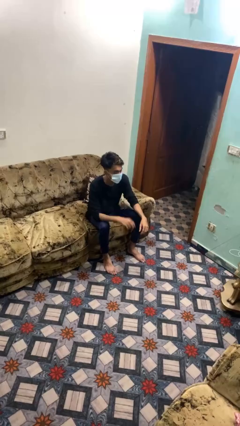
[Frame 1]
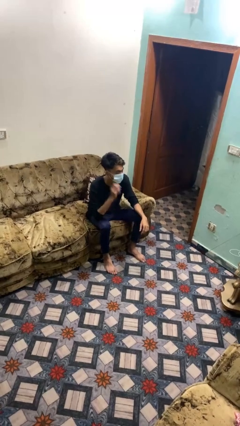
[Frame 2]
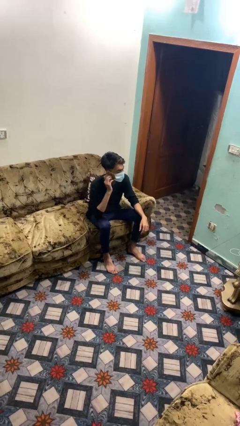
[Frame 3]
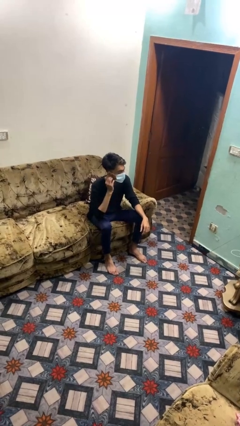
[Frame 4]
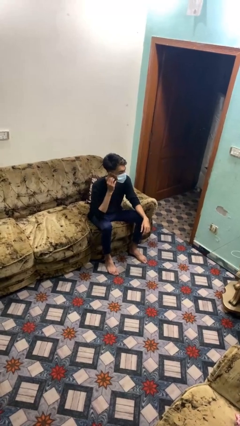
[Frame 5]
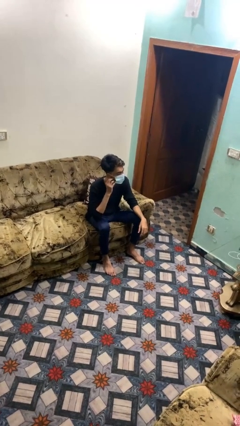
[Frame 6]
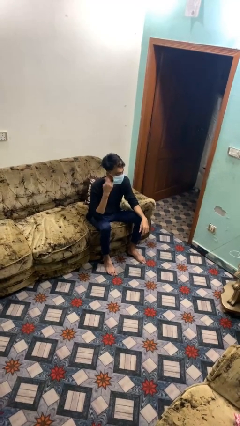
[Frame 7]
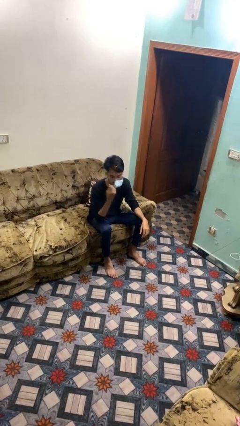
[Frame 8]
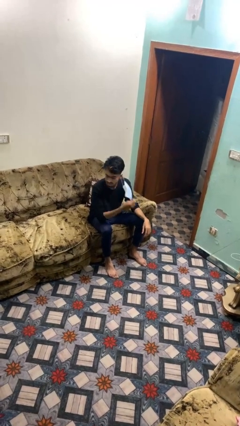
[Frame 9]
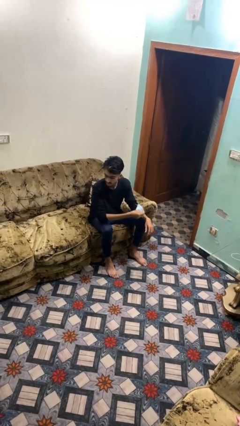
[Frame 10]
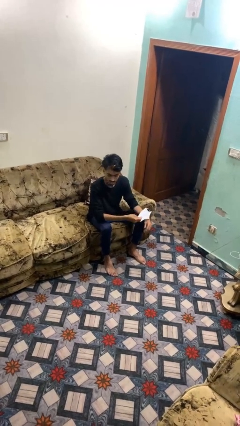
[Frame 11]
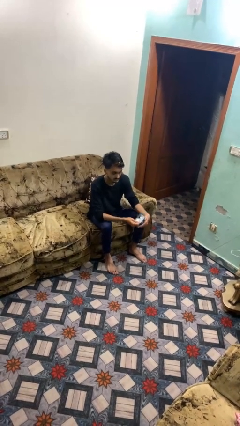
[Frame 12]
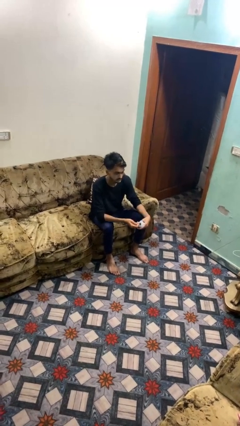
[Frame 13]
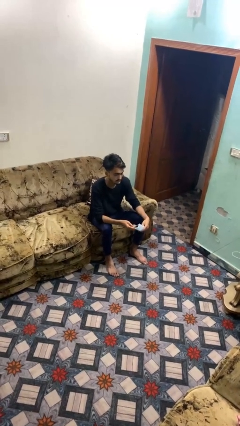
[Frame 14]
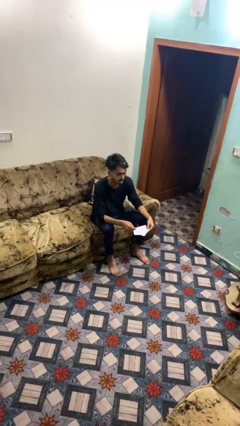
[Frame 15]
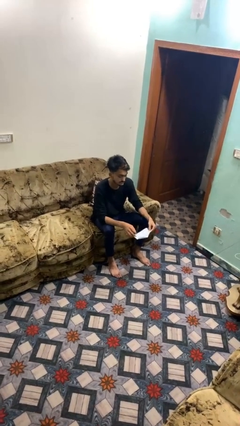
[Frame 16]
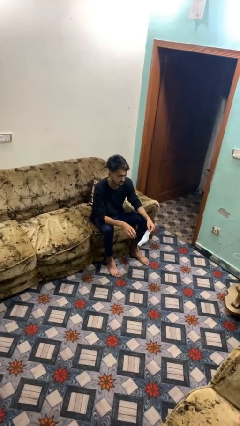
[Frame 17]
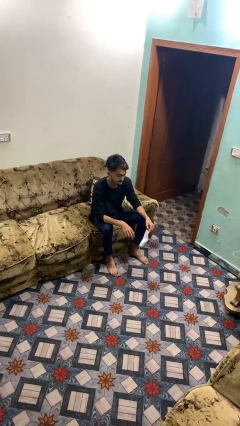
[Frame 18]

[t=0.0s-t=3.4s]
person takes off facemask

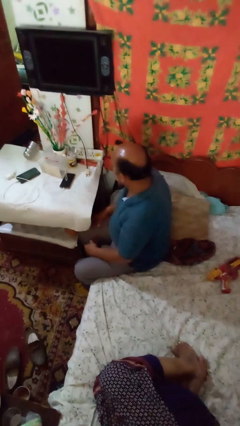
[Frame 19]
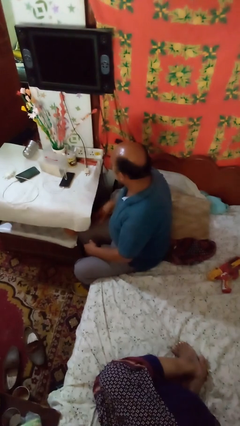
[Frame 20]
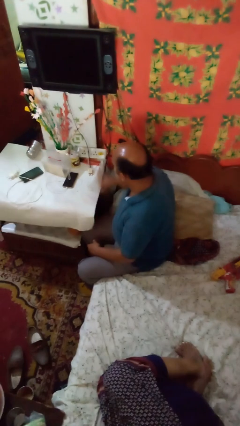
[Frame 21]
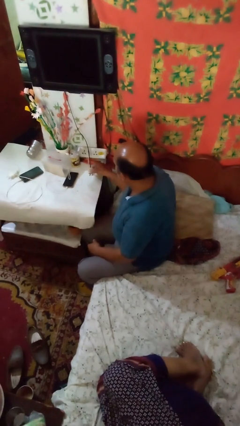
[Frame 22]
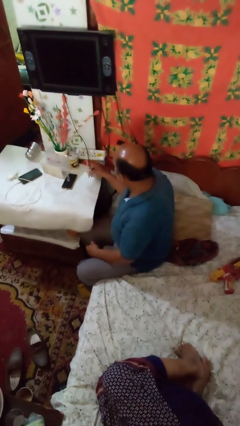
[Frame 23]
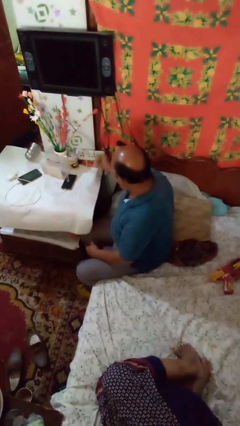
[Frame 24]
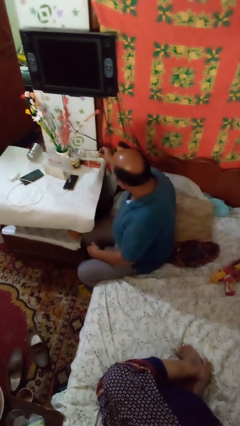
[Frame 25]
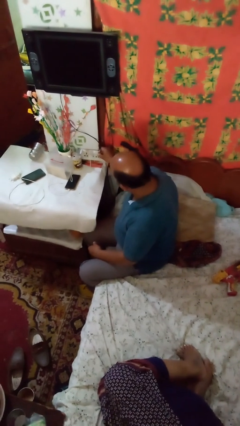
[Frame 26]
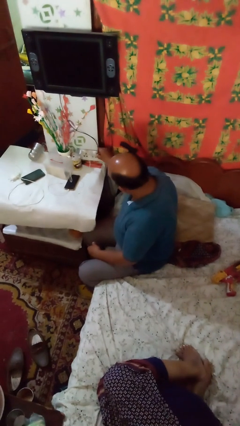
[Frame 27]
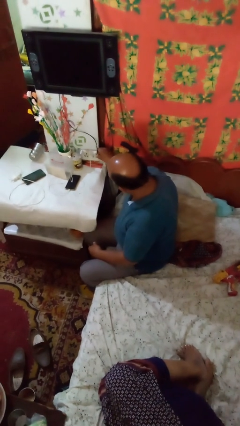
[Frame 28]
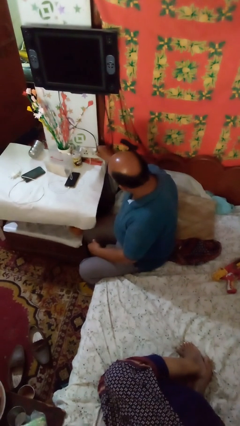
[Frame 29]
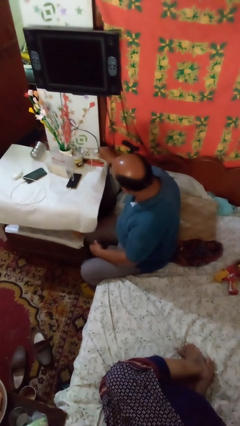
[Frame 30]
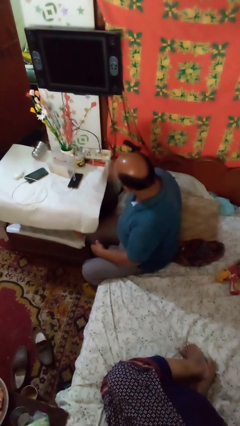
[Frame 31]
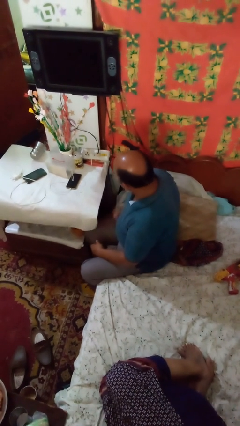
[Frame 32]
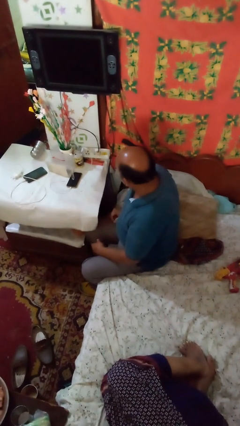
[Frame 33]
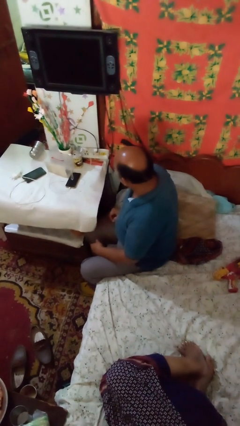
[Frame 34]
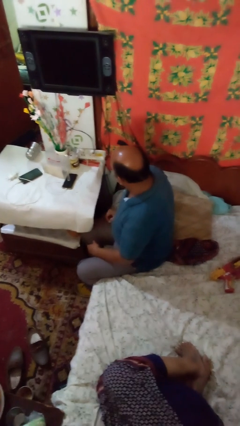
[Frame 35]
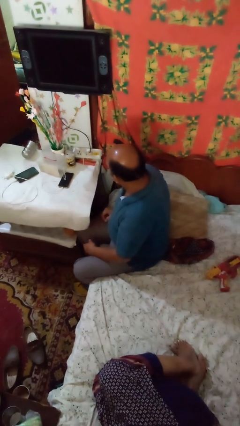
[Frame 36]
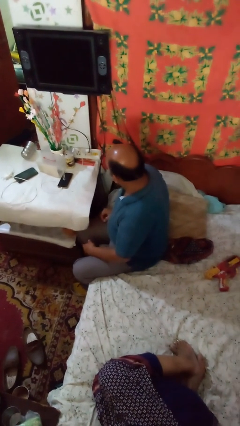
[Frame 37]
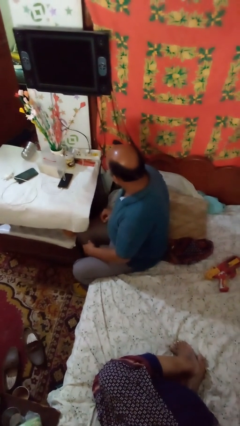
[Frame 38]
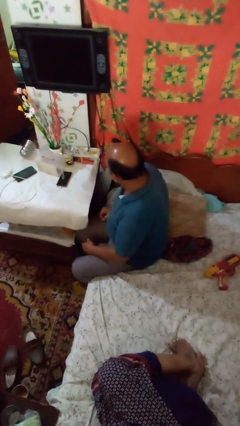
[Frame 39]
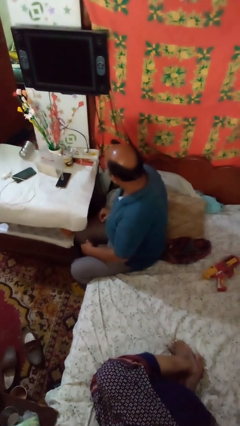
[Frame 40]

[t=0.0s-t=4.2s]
person plugs into electrical socket

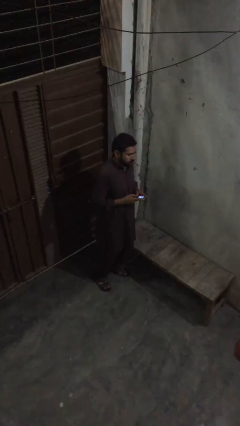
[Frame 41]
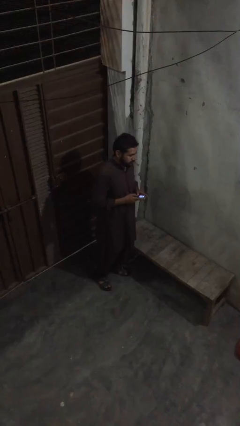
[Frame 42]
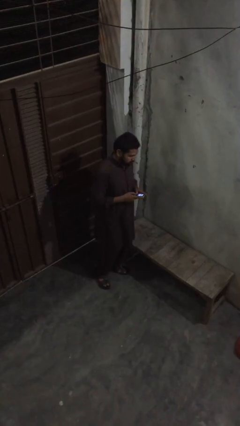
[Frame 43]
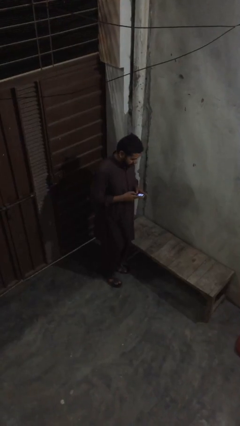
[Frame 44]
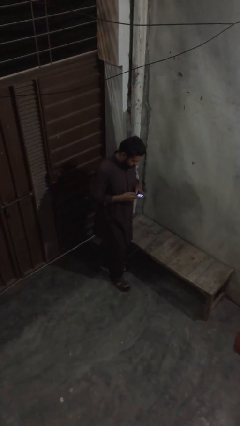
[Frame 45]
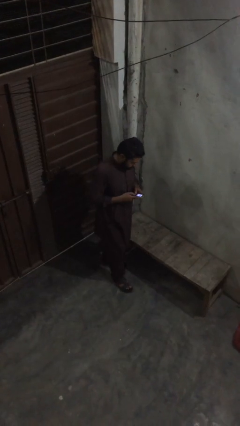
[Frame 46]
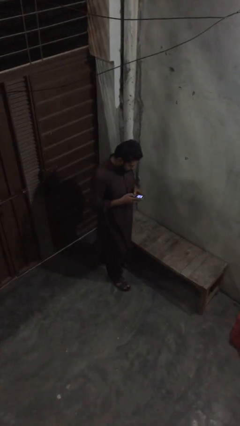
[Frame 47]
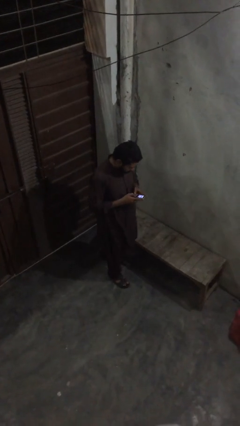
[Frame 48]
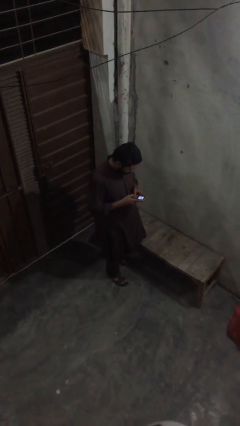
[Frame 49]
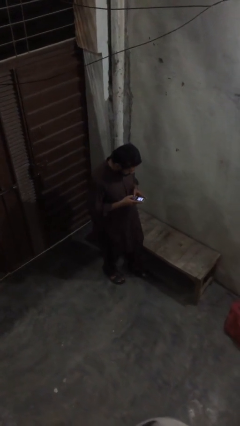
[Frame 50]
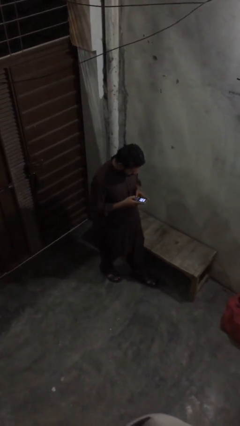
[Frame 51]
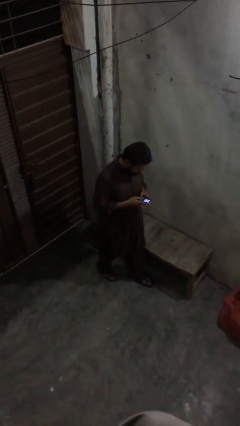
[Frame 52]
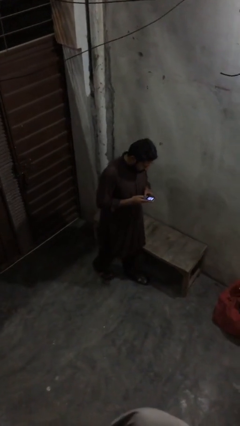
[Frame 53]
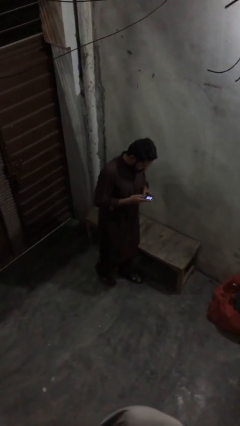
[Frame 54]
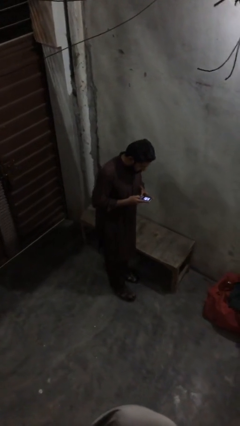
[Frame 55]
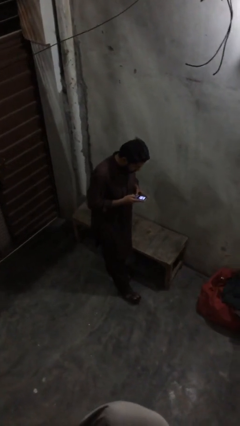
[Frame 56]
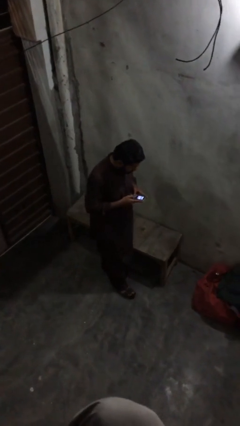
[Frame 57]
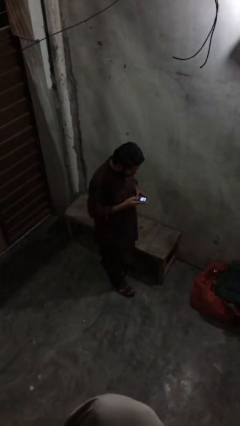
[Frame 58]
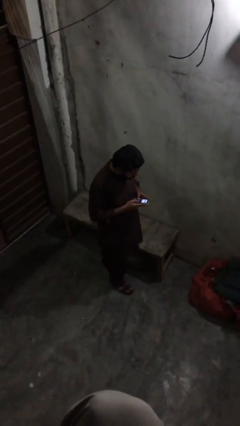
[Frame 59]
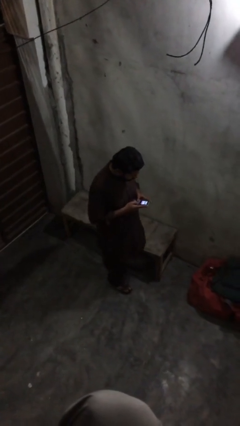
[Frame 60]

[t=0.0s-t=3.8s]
person texts on phone

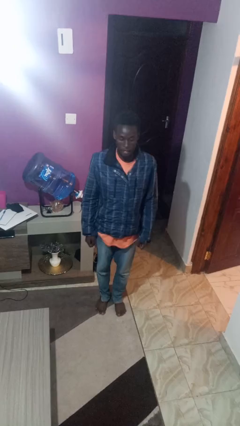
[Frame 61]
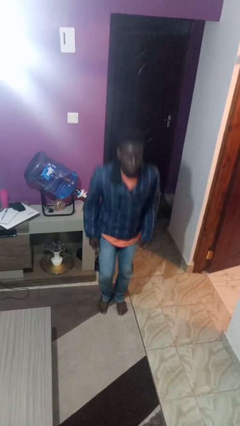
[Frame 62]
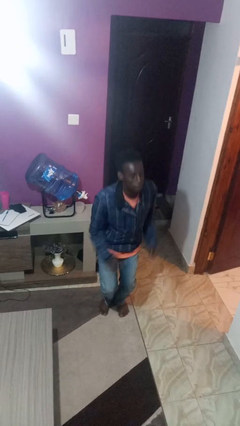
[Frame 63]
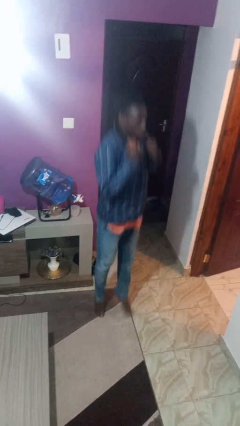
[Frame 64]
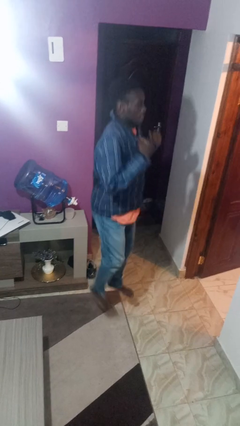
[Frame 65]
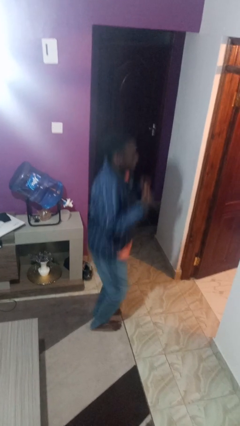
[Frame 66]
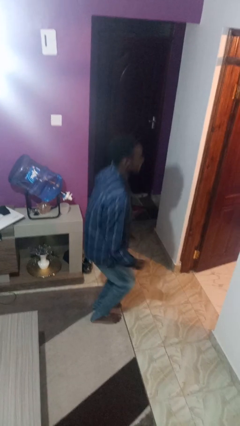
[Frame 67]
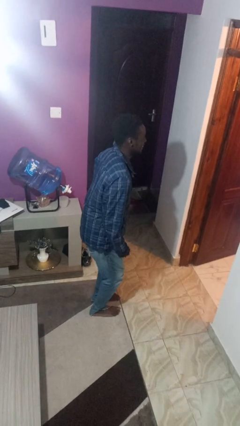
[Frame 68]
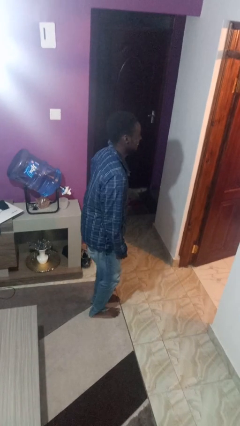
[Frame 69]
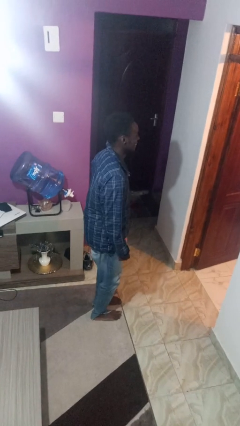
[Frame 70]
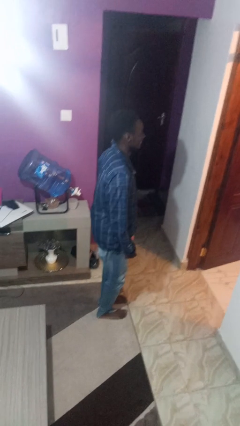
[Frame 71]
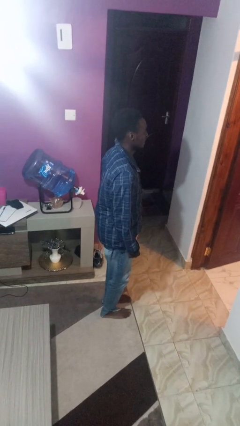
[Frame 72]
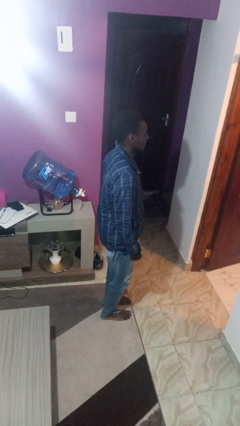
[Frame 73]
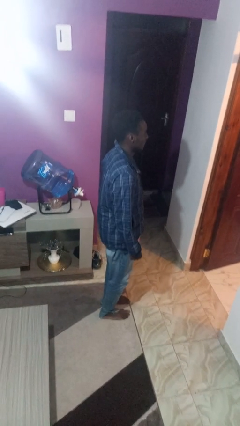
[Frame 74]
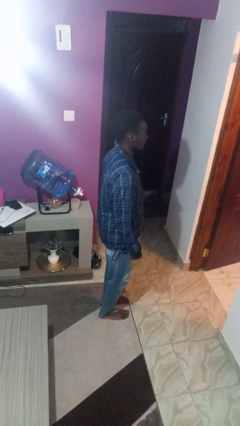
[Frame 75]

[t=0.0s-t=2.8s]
person jumps

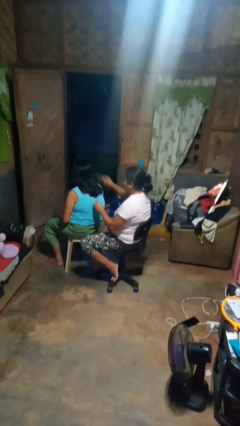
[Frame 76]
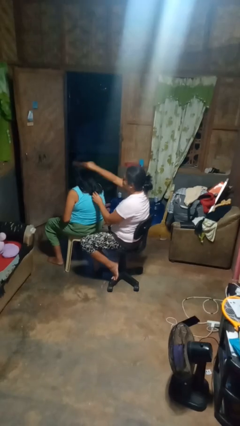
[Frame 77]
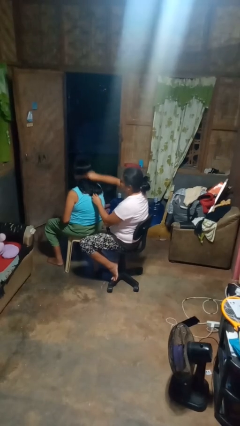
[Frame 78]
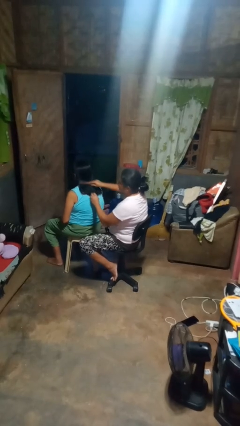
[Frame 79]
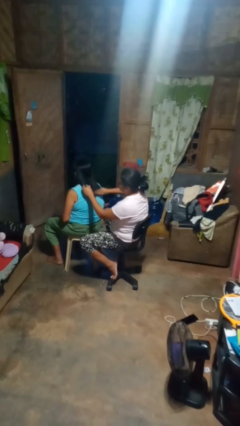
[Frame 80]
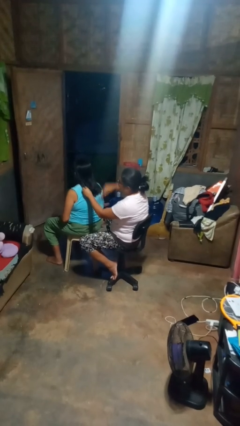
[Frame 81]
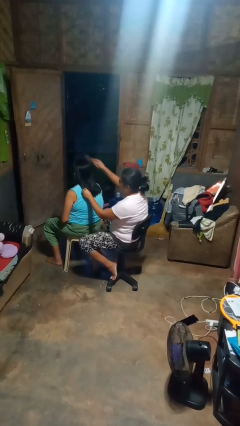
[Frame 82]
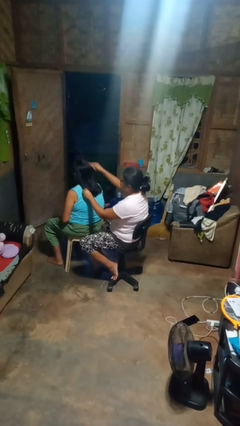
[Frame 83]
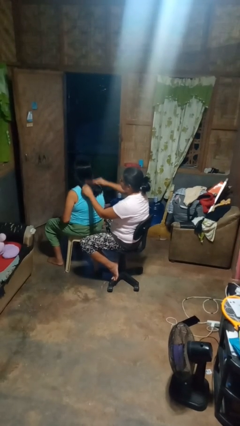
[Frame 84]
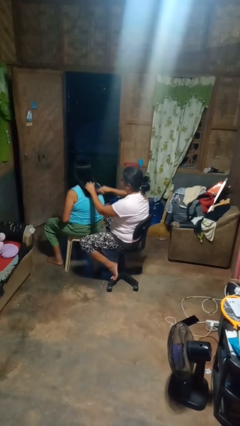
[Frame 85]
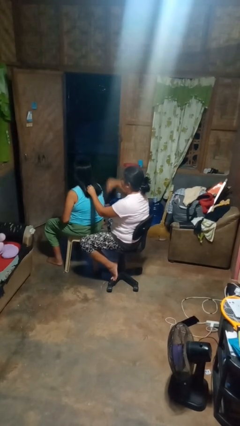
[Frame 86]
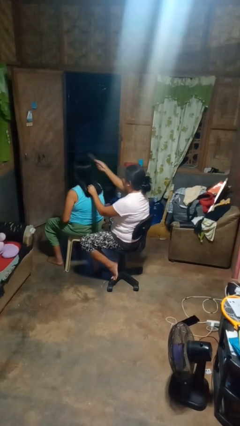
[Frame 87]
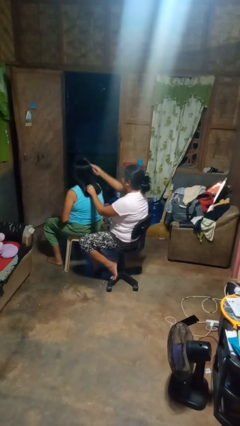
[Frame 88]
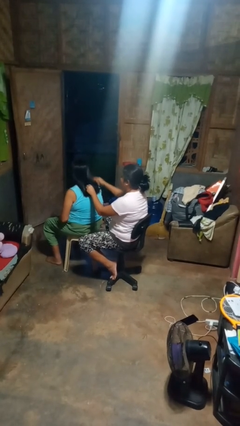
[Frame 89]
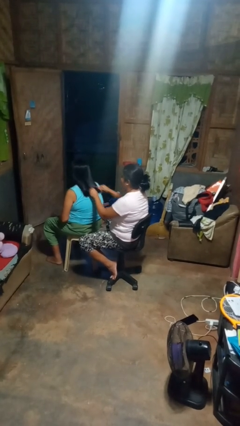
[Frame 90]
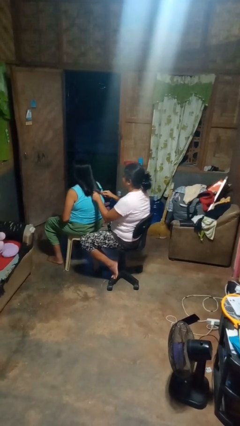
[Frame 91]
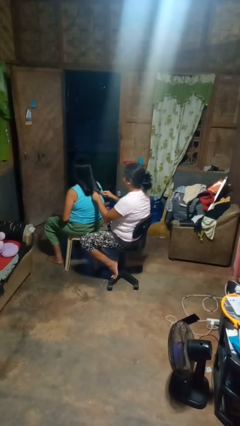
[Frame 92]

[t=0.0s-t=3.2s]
person brushes hair of person
